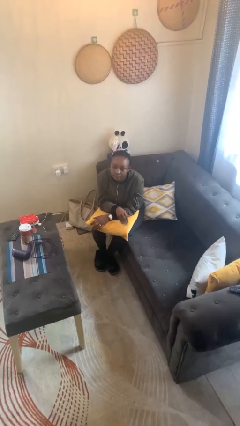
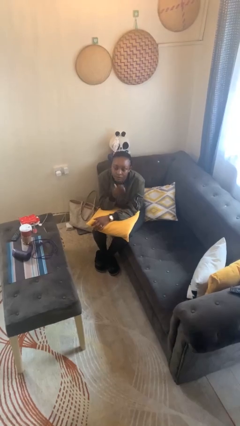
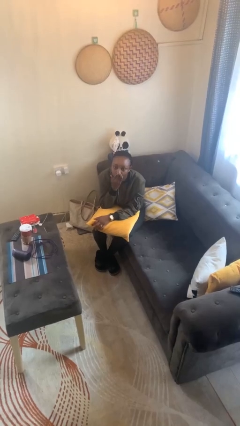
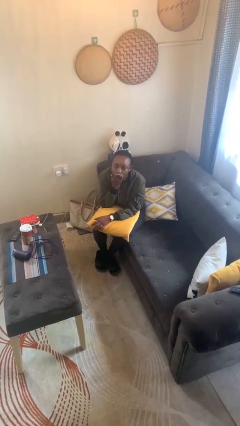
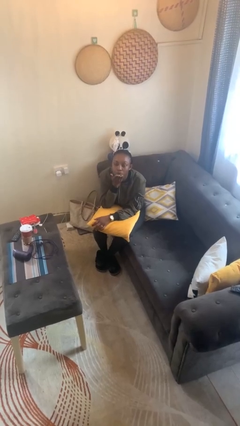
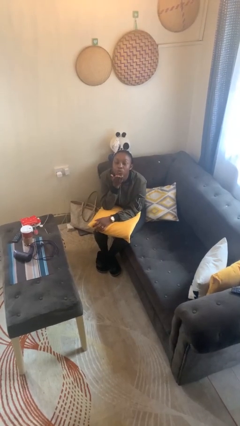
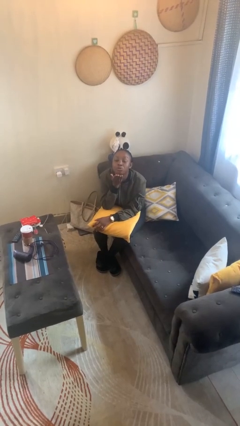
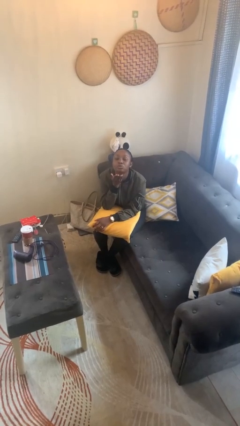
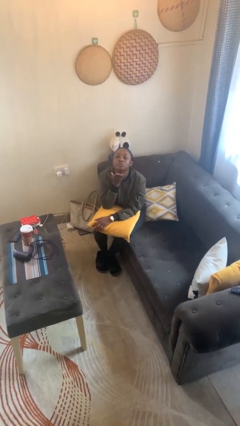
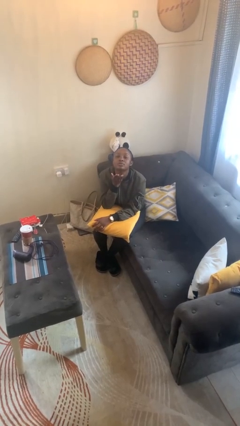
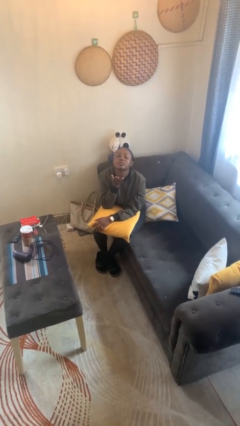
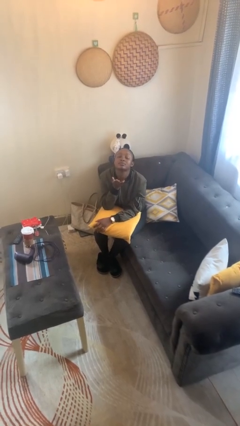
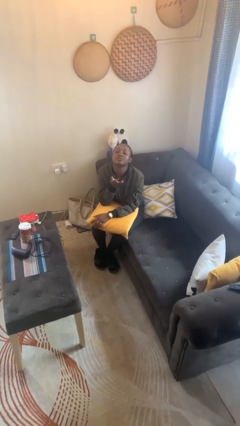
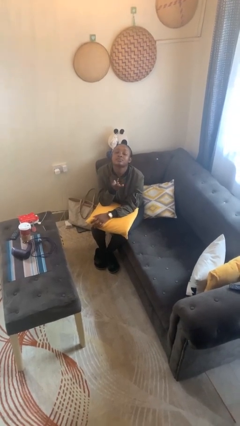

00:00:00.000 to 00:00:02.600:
person gestures blow kiss

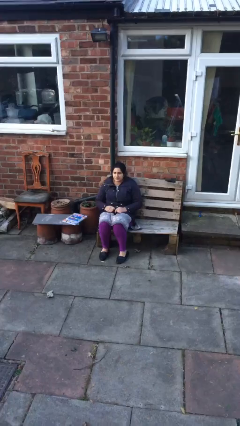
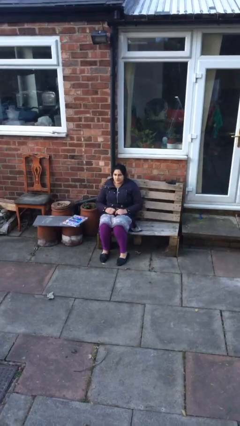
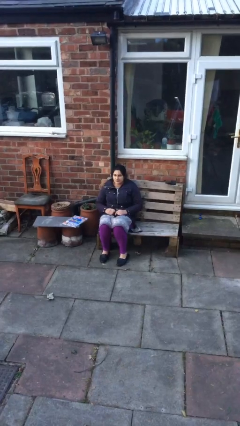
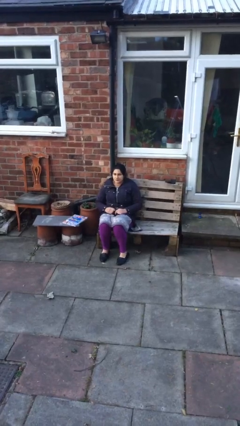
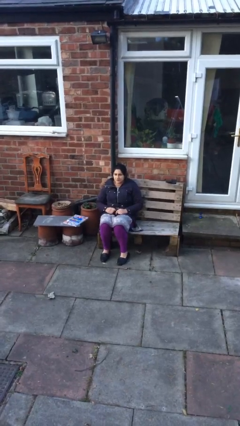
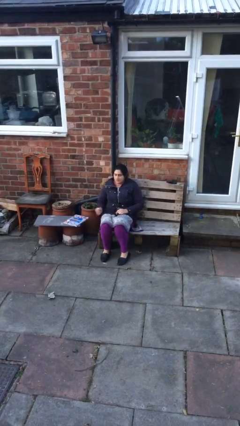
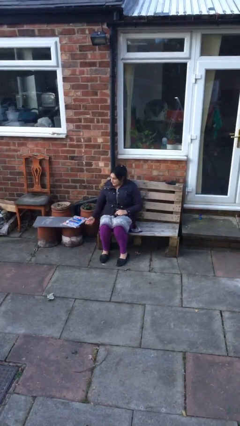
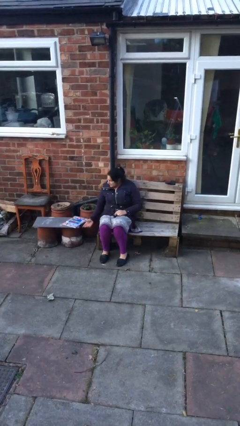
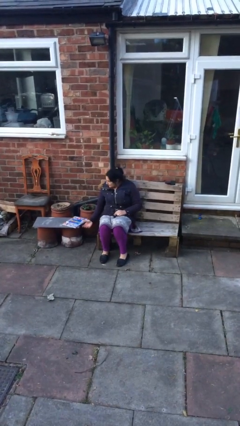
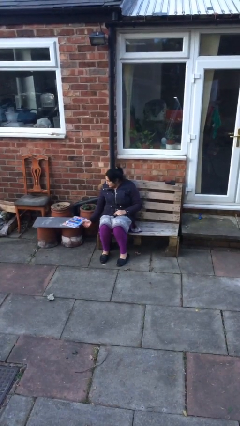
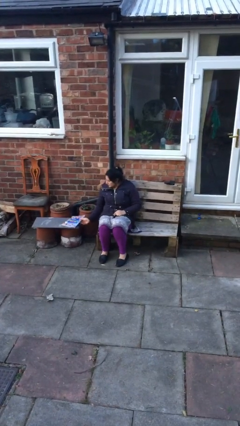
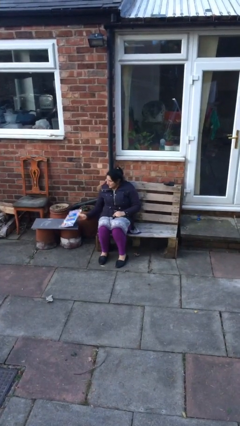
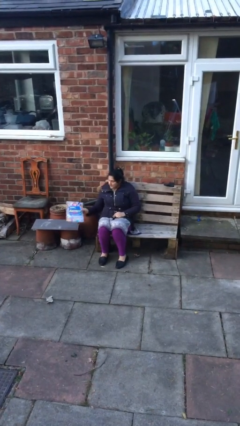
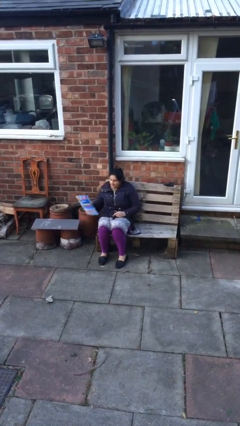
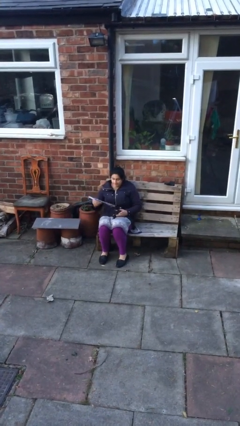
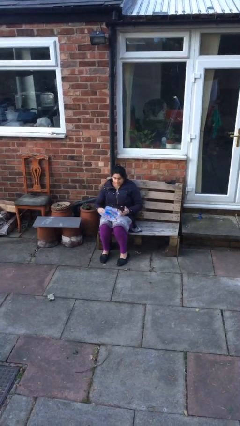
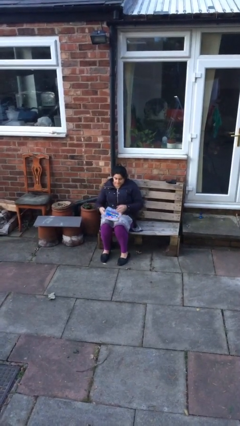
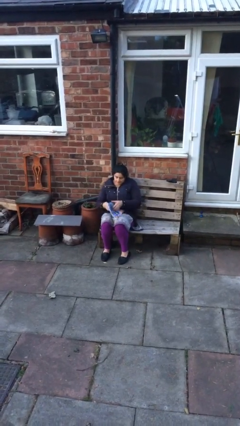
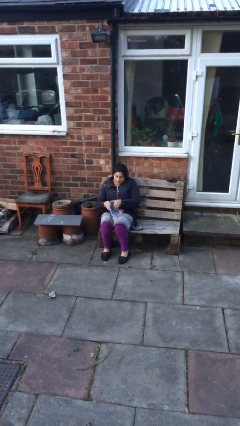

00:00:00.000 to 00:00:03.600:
person picks up object from table

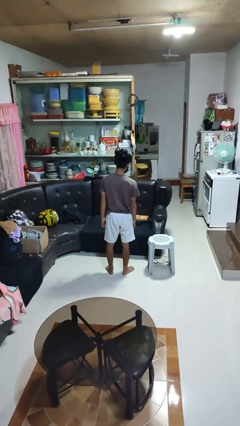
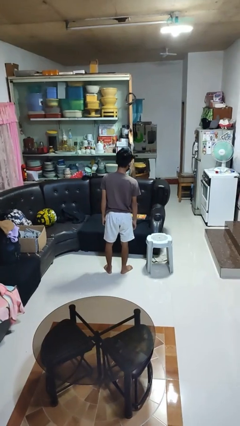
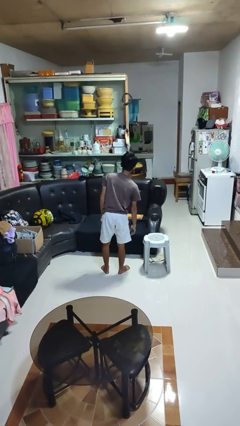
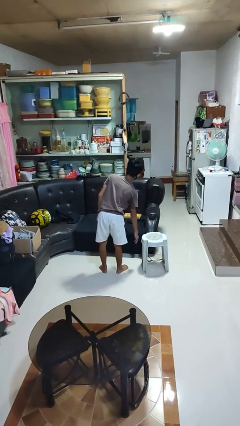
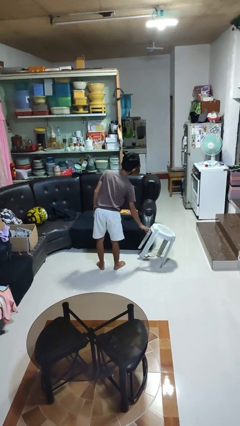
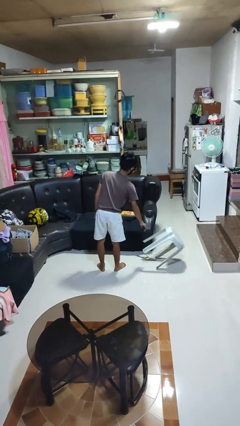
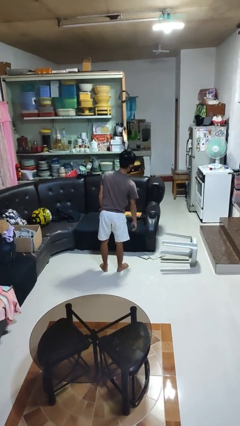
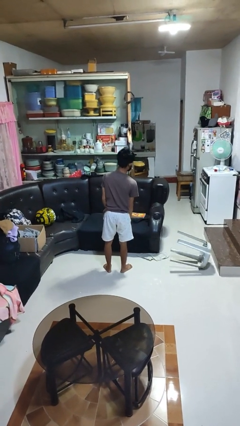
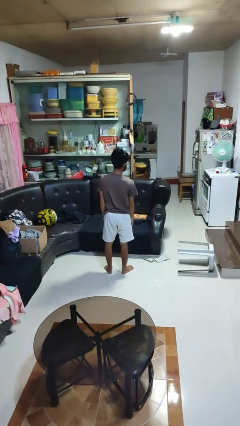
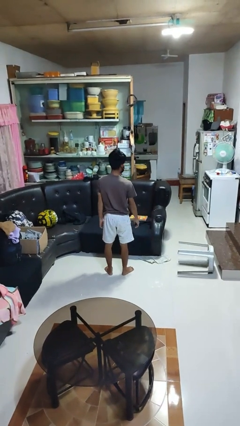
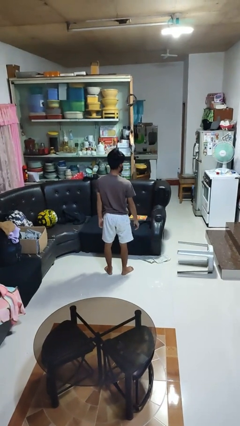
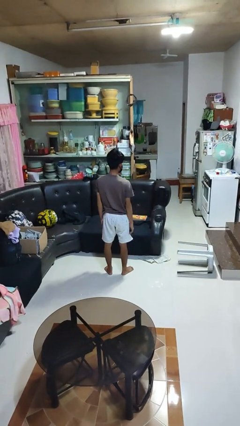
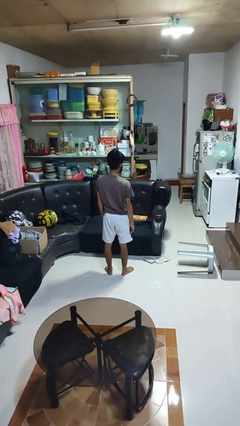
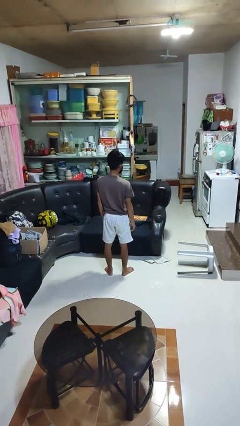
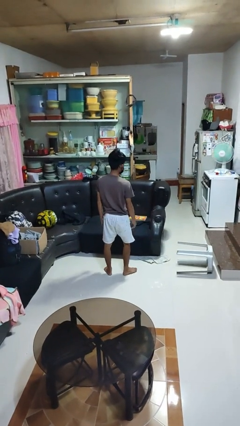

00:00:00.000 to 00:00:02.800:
person knocks over furniture

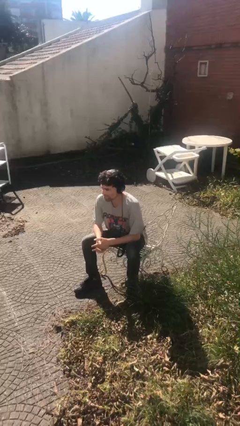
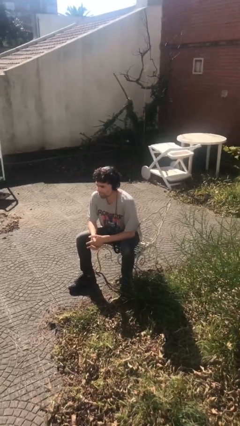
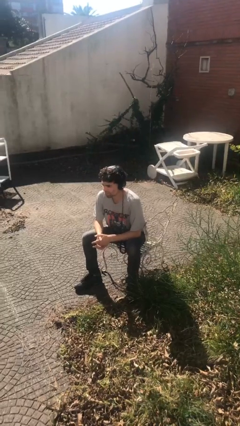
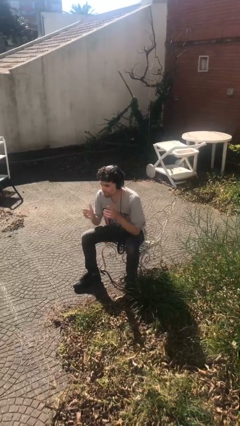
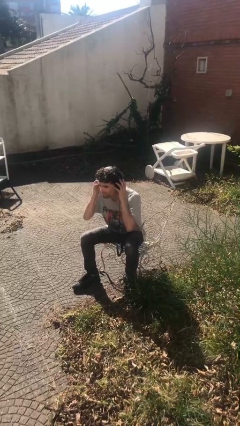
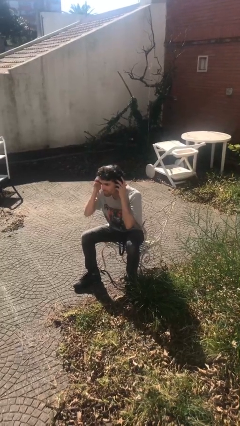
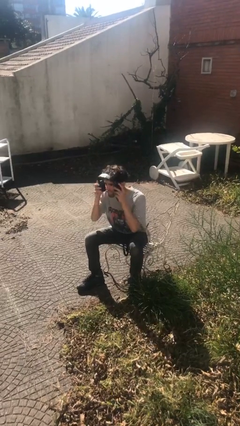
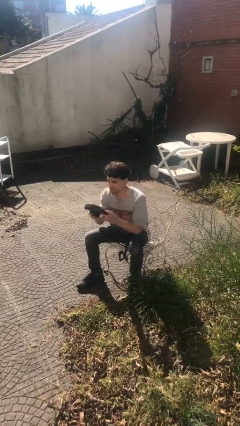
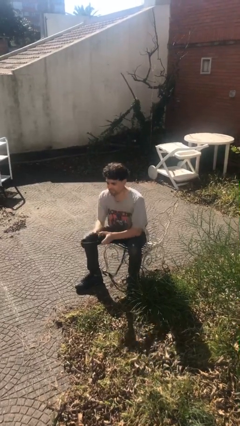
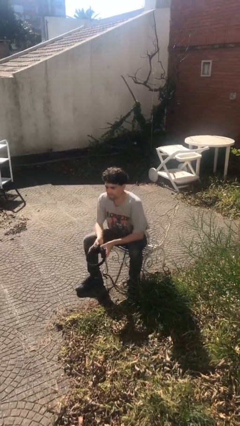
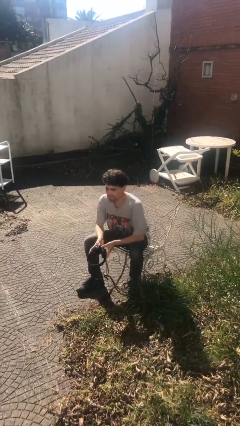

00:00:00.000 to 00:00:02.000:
person takes off headphones

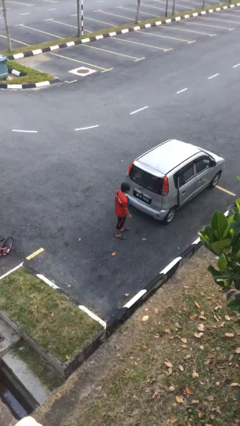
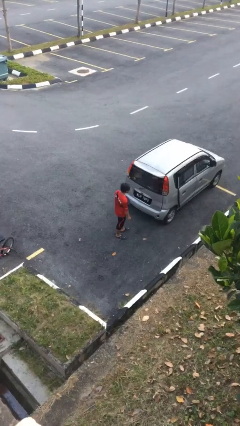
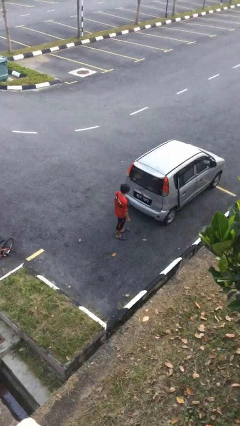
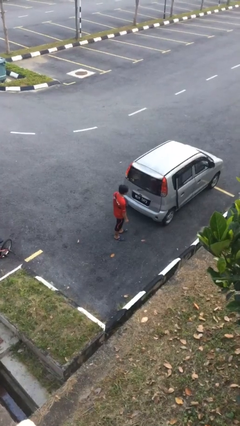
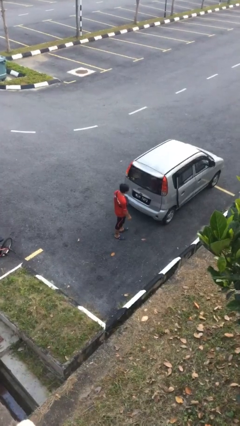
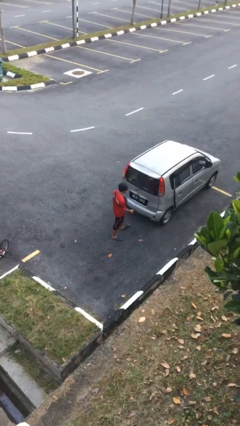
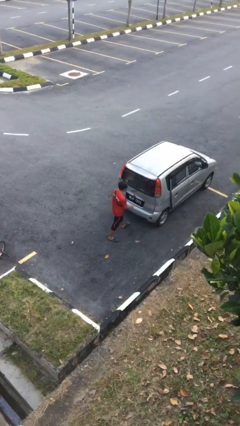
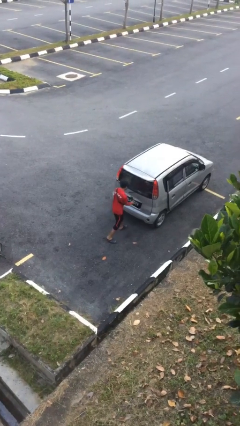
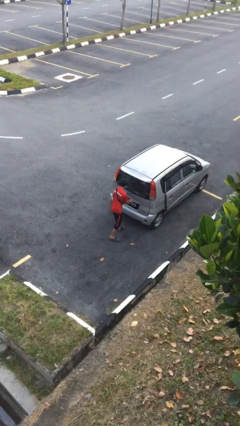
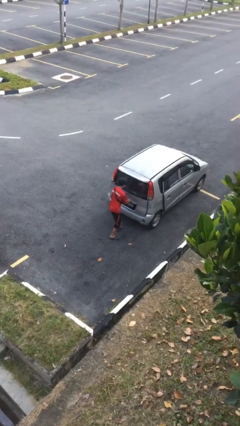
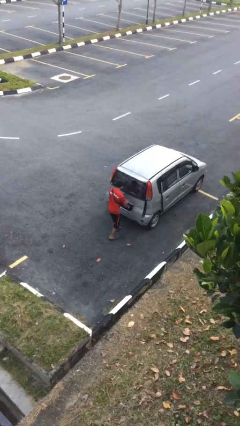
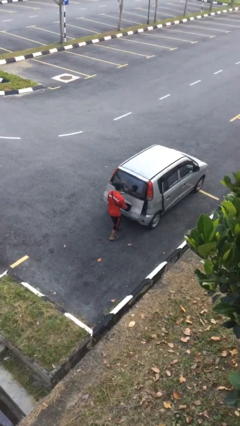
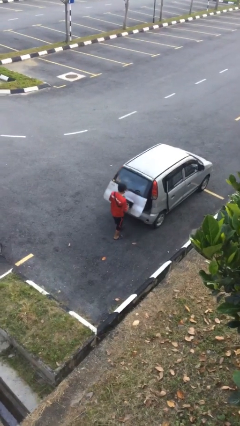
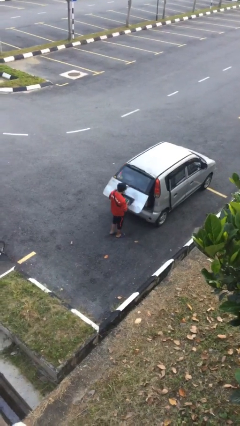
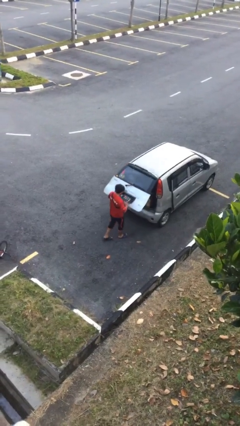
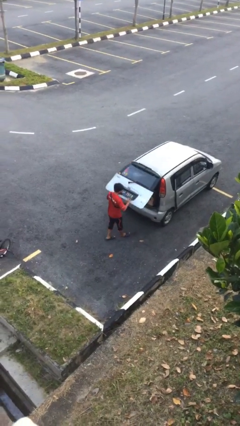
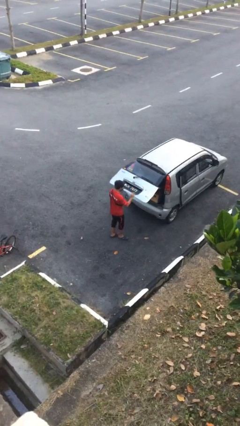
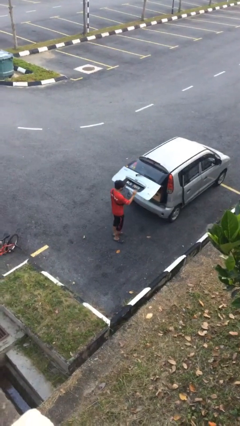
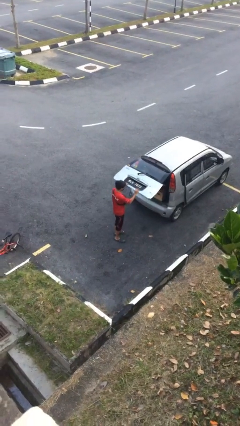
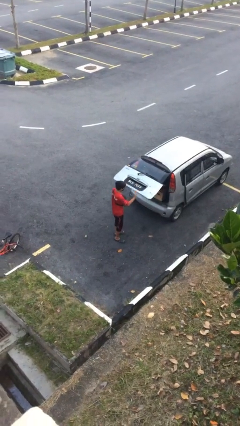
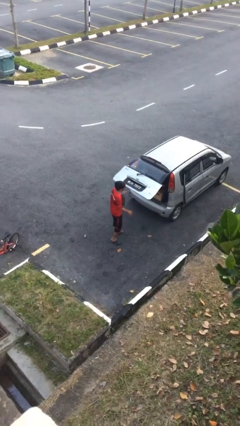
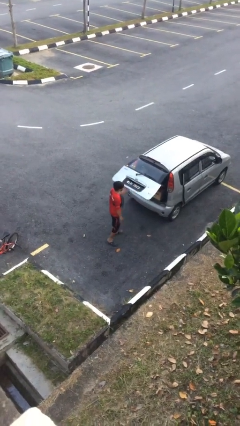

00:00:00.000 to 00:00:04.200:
person opens car trunk

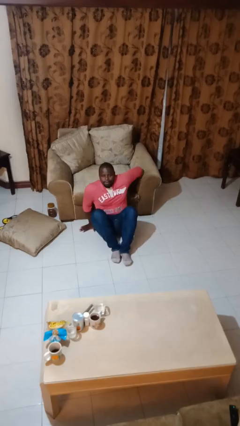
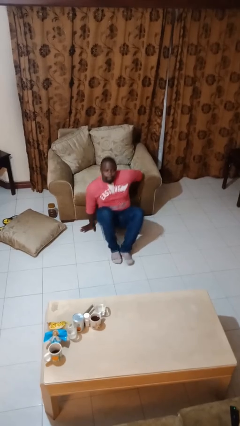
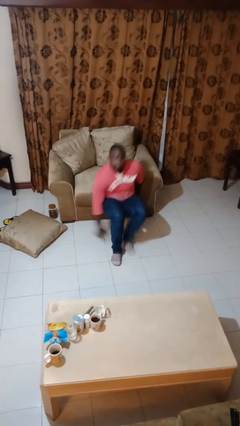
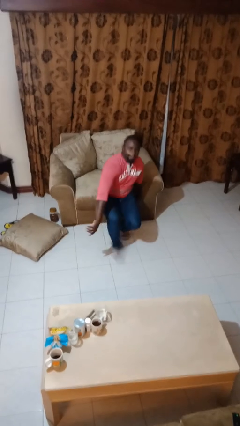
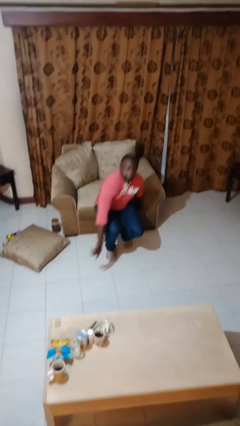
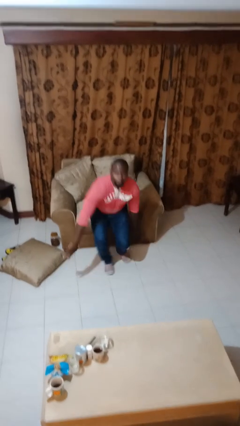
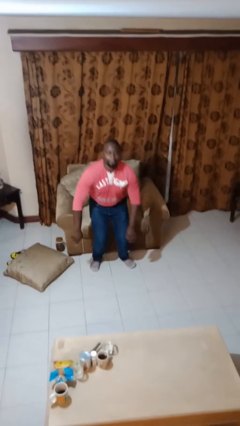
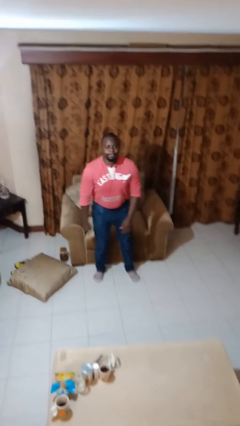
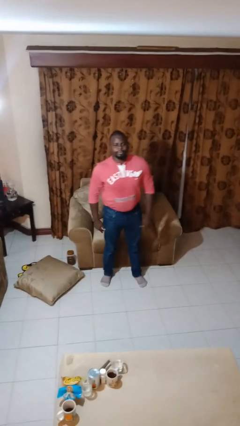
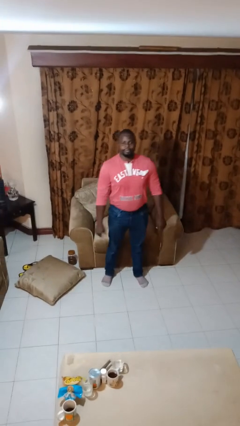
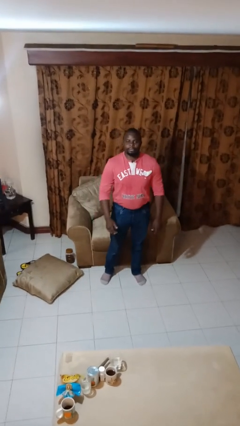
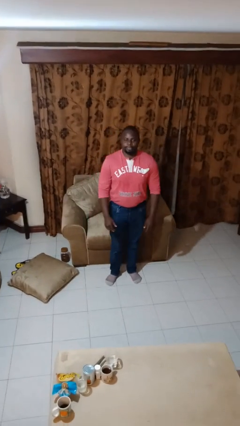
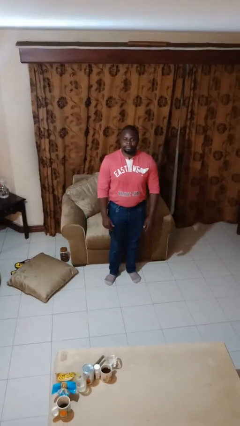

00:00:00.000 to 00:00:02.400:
person stands up from floor
